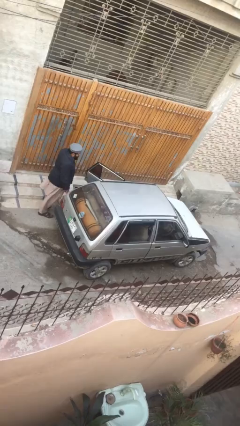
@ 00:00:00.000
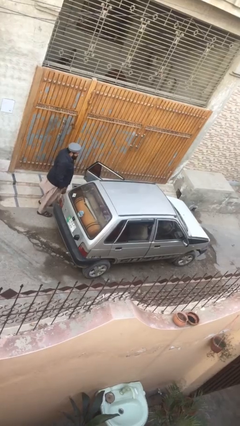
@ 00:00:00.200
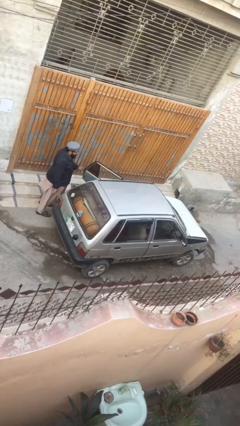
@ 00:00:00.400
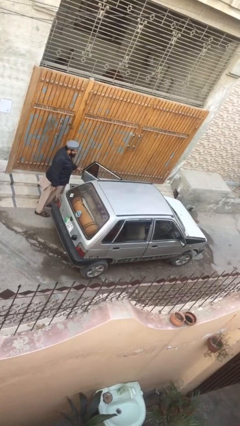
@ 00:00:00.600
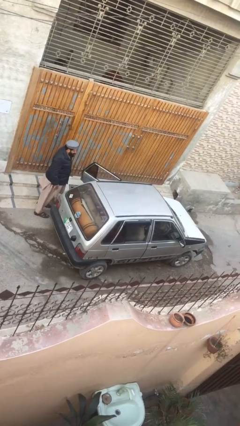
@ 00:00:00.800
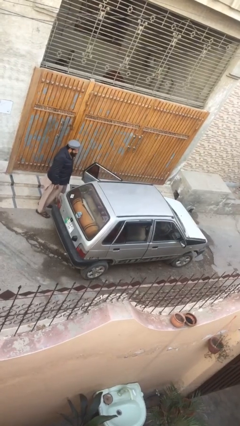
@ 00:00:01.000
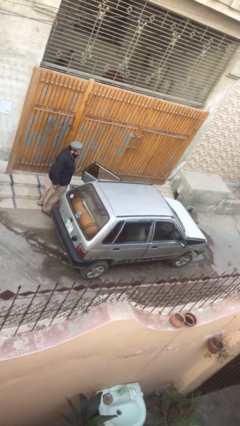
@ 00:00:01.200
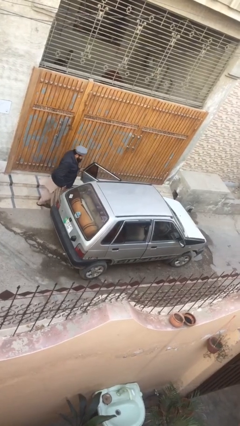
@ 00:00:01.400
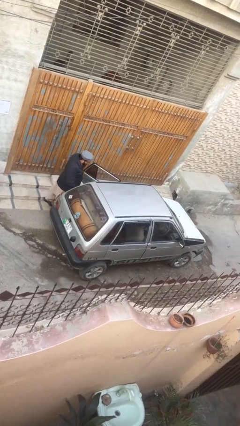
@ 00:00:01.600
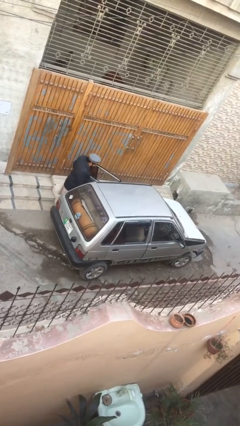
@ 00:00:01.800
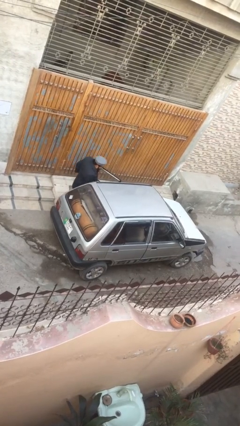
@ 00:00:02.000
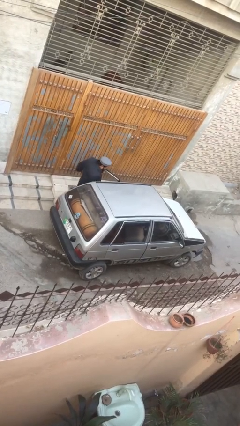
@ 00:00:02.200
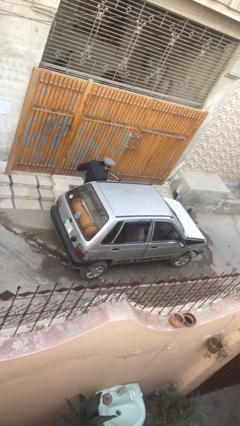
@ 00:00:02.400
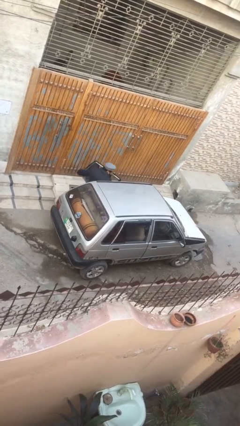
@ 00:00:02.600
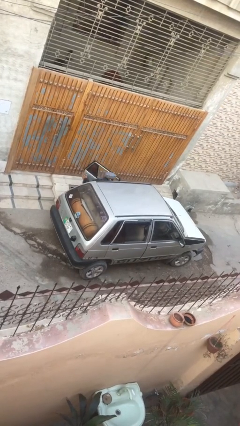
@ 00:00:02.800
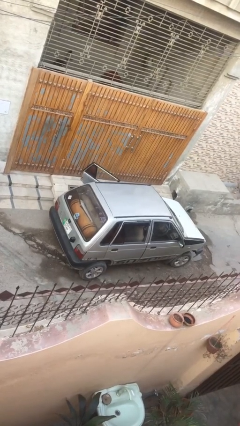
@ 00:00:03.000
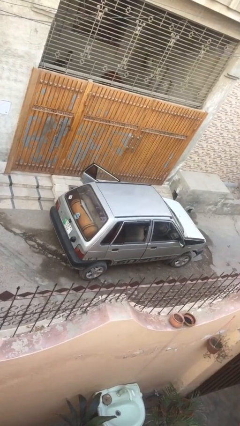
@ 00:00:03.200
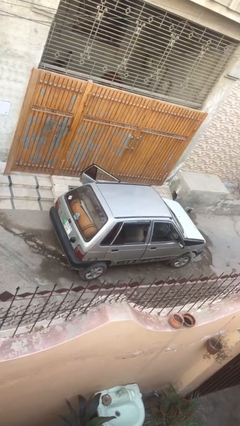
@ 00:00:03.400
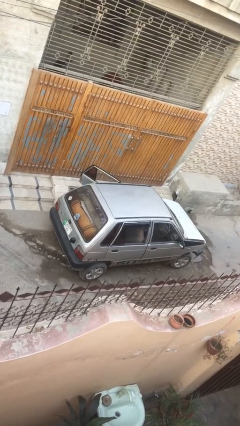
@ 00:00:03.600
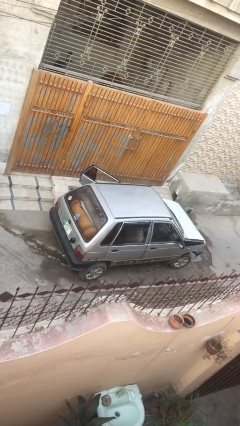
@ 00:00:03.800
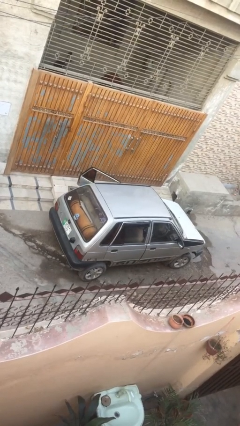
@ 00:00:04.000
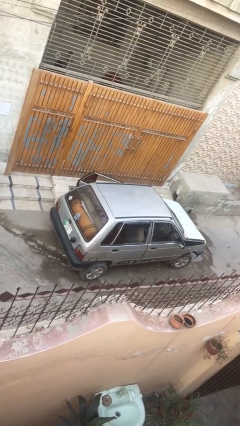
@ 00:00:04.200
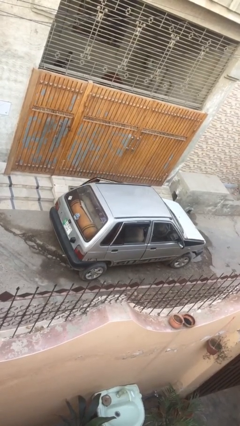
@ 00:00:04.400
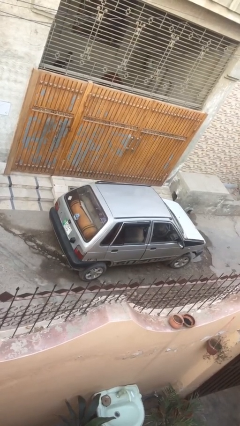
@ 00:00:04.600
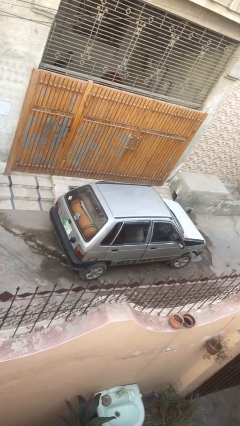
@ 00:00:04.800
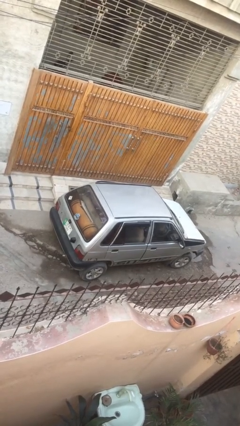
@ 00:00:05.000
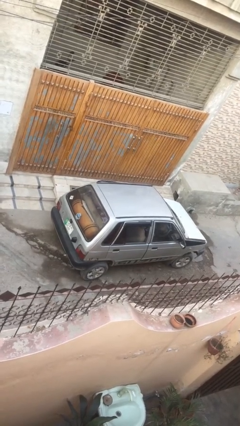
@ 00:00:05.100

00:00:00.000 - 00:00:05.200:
car picks up person

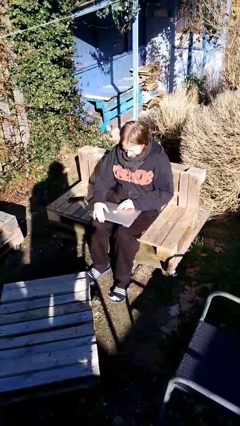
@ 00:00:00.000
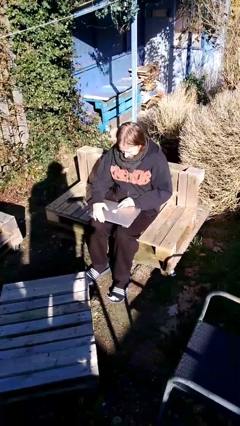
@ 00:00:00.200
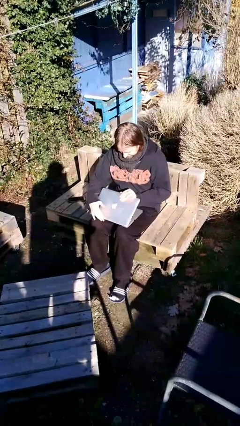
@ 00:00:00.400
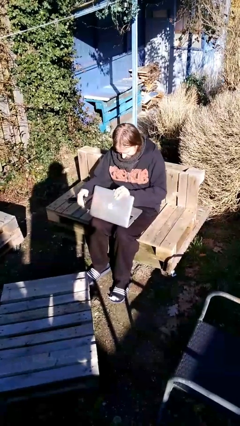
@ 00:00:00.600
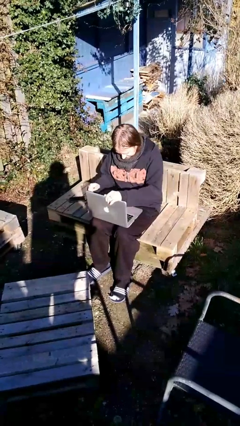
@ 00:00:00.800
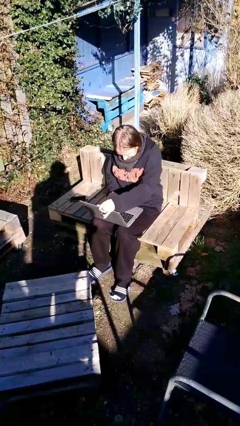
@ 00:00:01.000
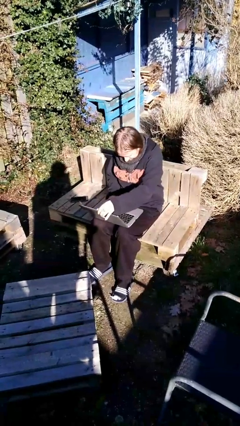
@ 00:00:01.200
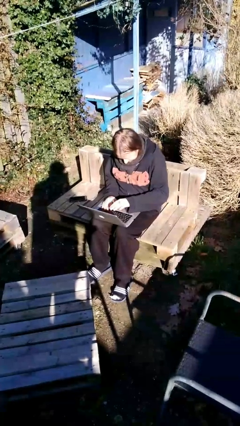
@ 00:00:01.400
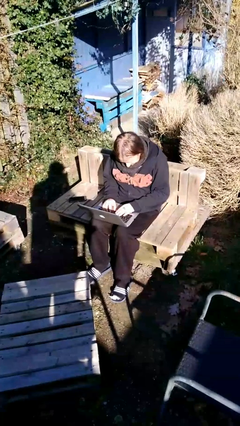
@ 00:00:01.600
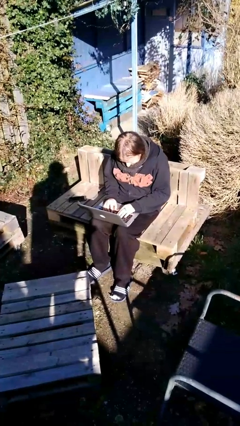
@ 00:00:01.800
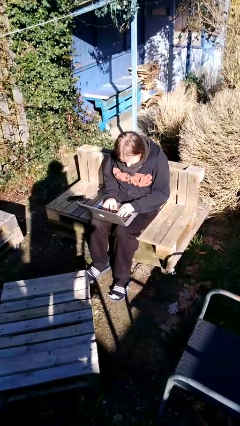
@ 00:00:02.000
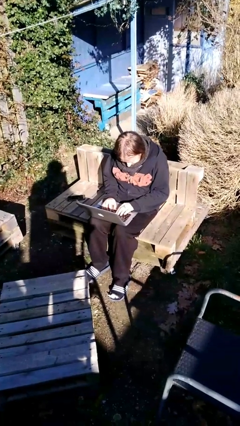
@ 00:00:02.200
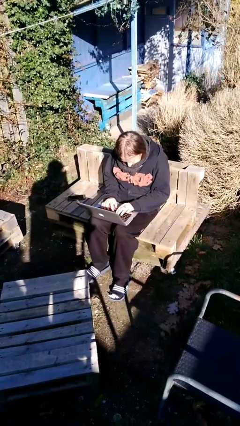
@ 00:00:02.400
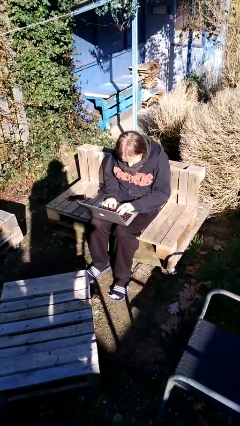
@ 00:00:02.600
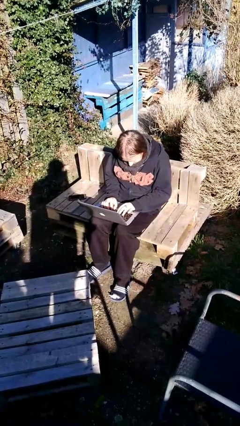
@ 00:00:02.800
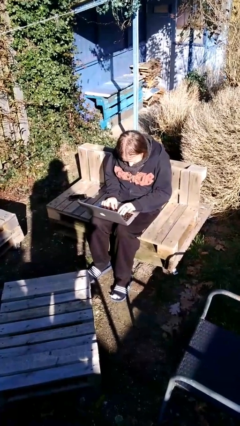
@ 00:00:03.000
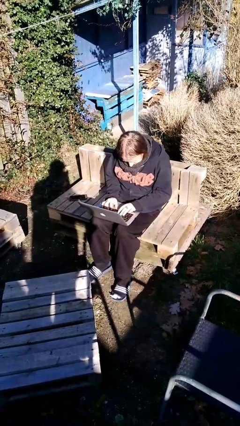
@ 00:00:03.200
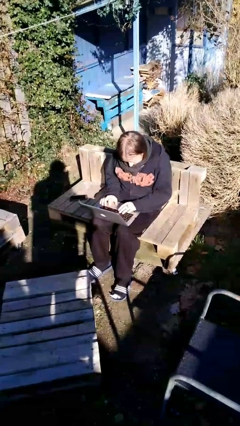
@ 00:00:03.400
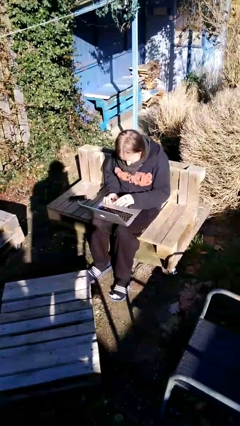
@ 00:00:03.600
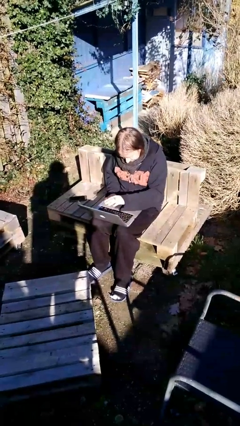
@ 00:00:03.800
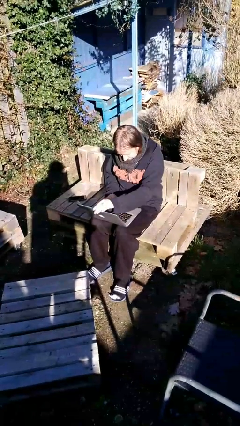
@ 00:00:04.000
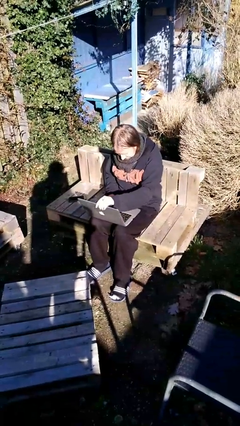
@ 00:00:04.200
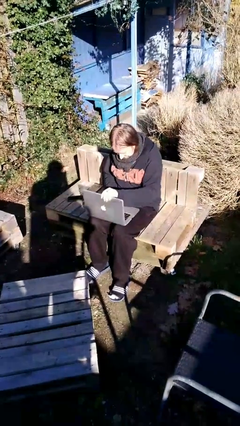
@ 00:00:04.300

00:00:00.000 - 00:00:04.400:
person interacts with laptop

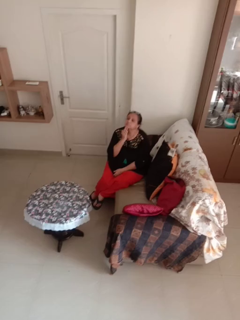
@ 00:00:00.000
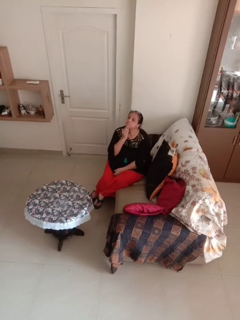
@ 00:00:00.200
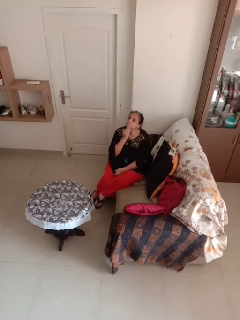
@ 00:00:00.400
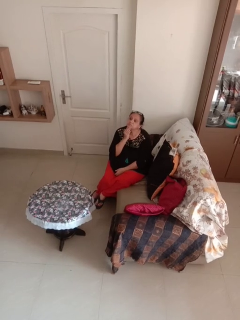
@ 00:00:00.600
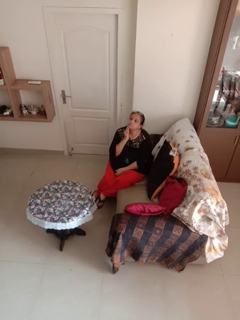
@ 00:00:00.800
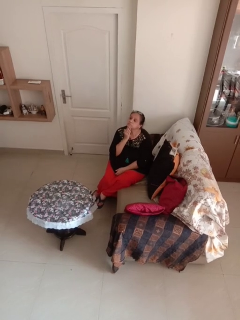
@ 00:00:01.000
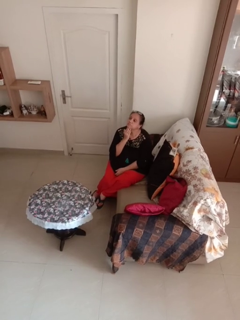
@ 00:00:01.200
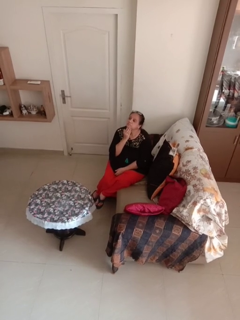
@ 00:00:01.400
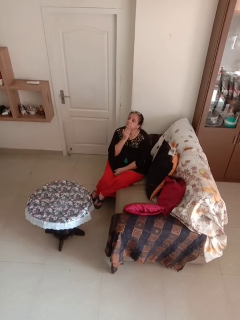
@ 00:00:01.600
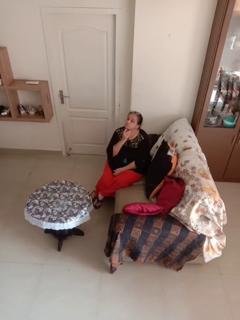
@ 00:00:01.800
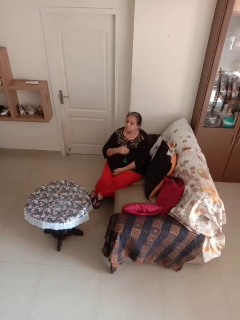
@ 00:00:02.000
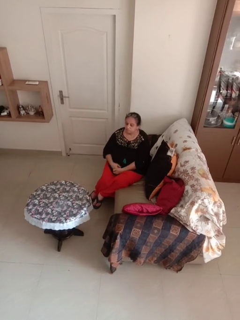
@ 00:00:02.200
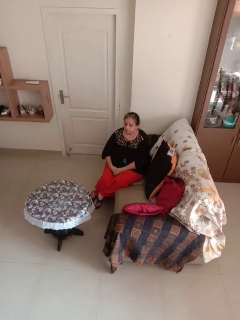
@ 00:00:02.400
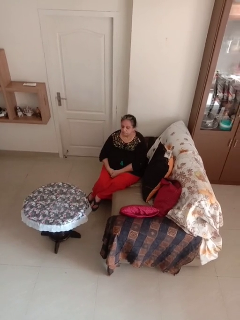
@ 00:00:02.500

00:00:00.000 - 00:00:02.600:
person strokes chin

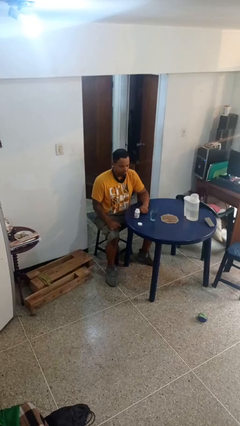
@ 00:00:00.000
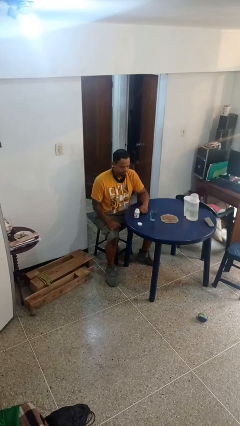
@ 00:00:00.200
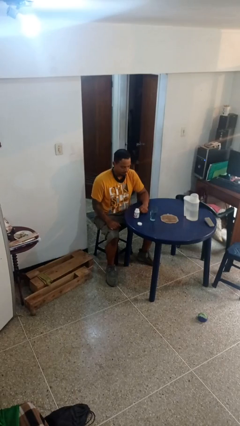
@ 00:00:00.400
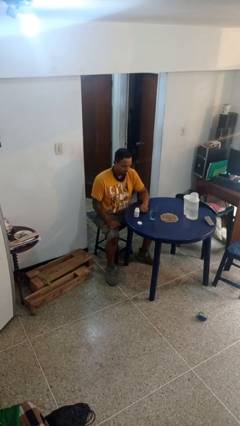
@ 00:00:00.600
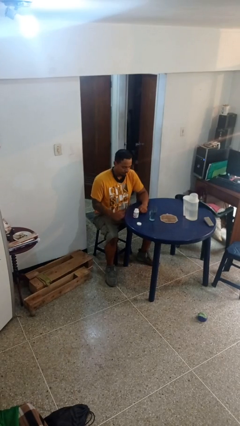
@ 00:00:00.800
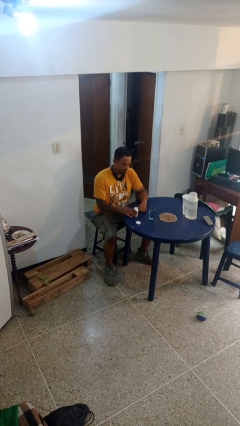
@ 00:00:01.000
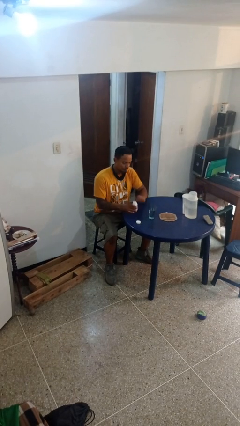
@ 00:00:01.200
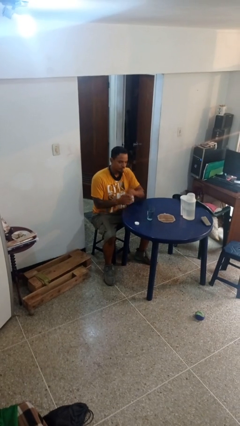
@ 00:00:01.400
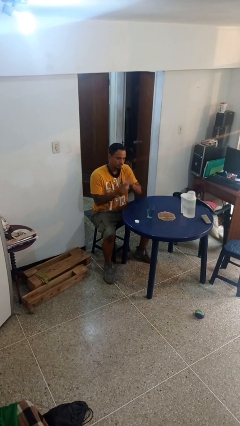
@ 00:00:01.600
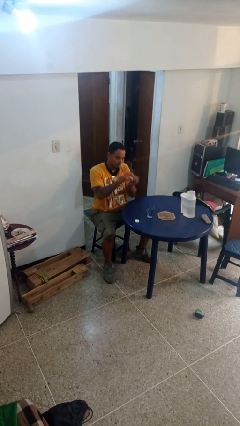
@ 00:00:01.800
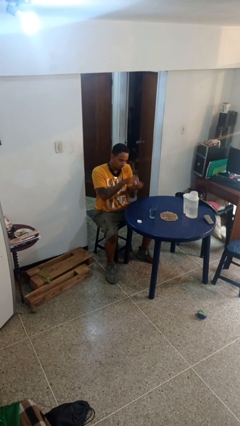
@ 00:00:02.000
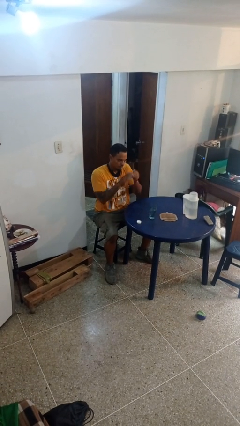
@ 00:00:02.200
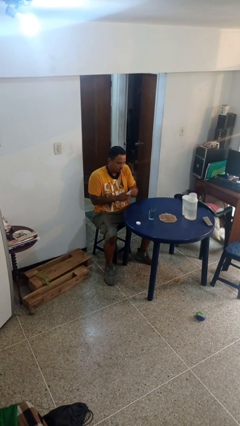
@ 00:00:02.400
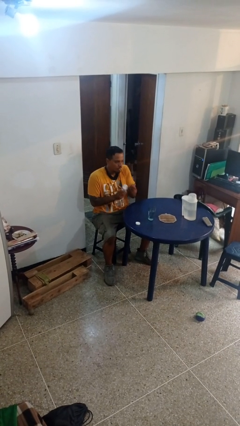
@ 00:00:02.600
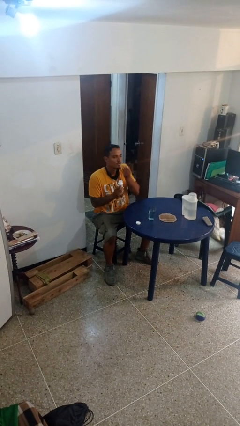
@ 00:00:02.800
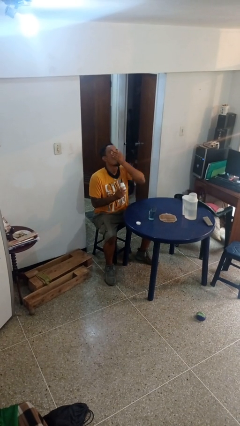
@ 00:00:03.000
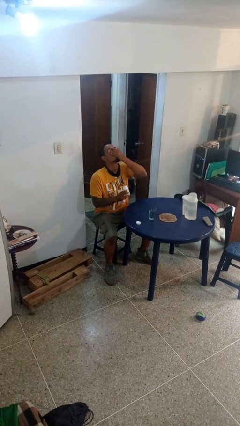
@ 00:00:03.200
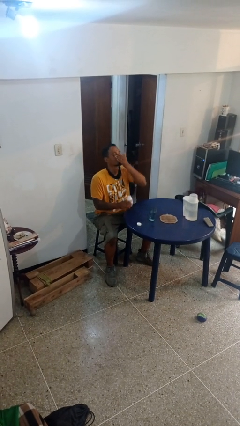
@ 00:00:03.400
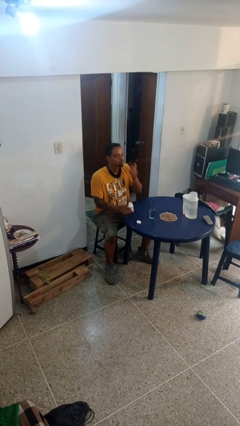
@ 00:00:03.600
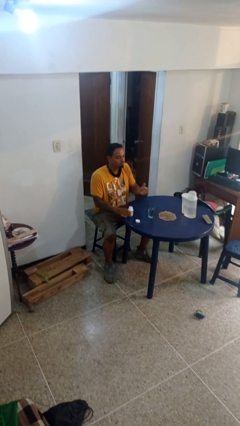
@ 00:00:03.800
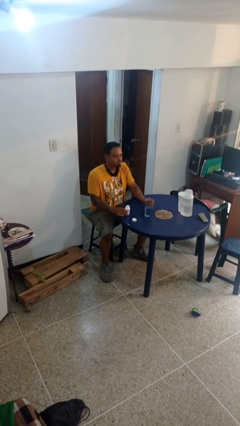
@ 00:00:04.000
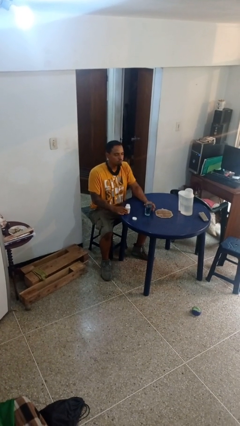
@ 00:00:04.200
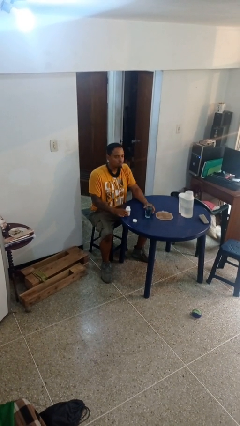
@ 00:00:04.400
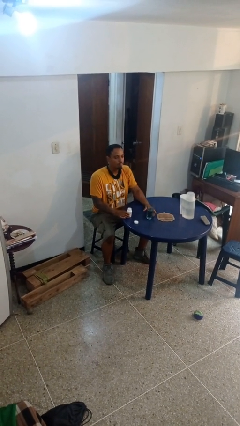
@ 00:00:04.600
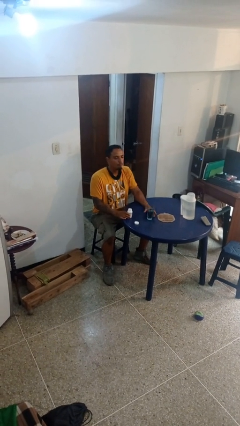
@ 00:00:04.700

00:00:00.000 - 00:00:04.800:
person takes medicine pills

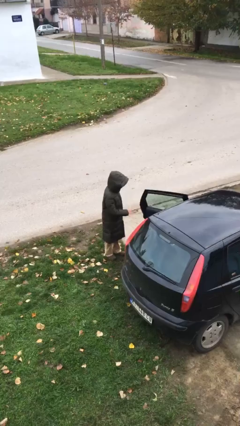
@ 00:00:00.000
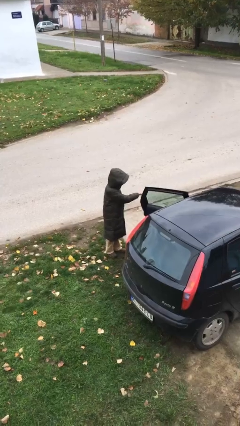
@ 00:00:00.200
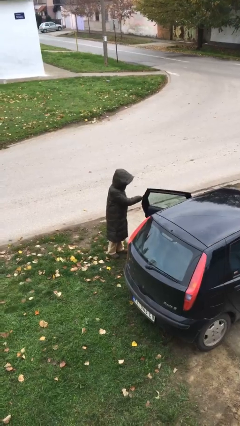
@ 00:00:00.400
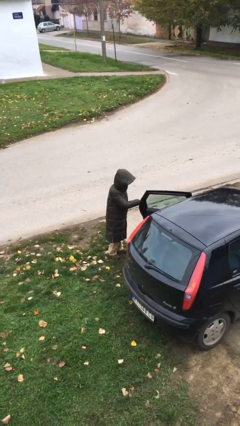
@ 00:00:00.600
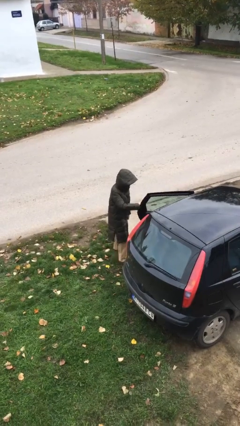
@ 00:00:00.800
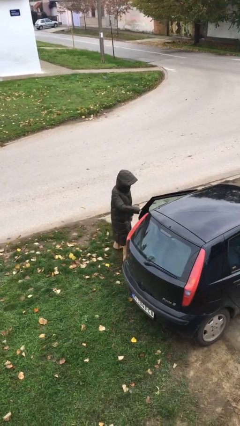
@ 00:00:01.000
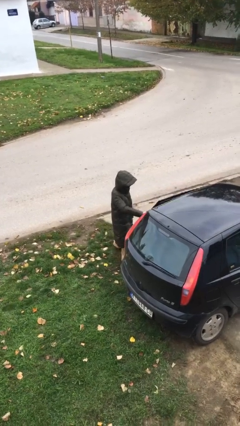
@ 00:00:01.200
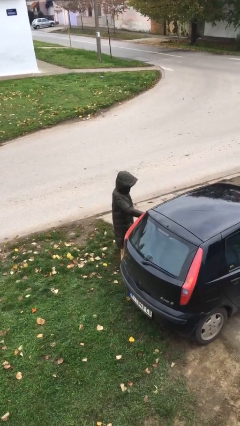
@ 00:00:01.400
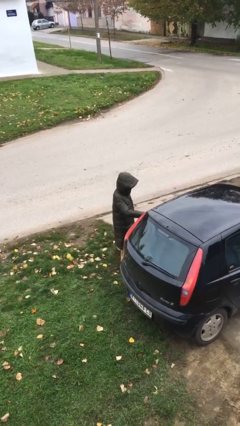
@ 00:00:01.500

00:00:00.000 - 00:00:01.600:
person closes car door
